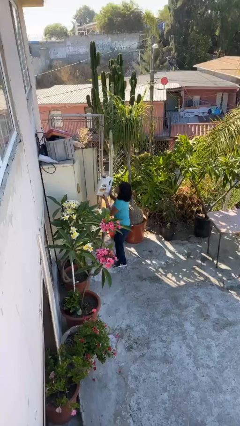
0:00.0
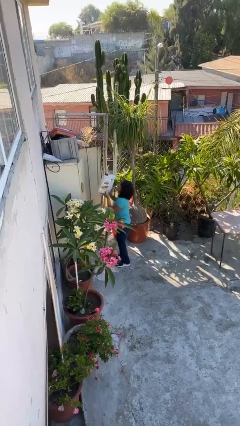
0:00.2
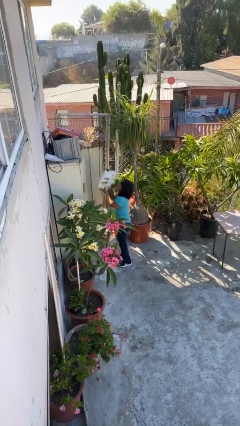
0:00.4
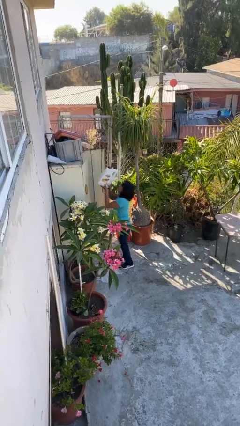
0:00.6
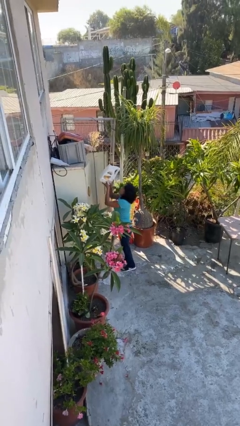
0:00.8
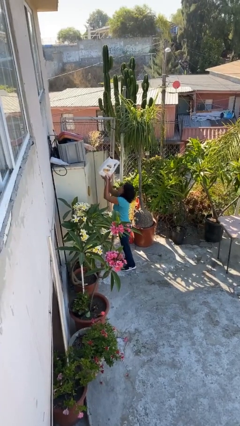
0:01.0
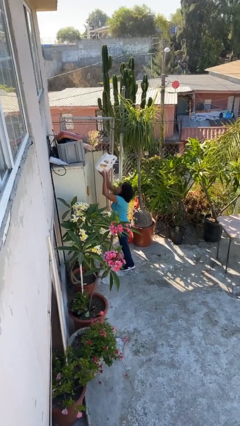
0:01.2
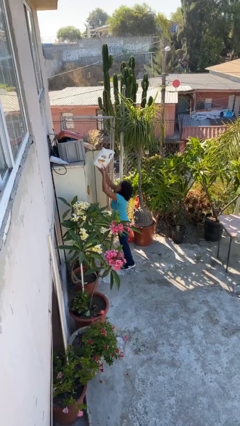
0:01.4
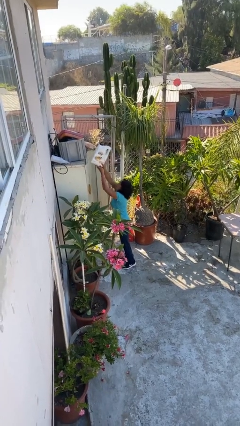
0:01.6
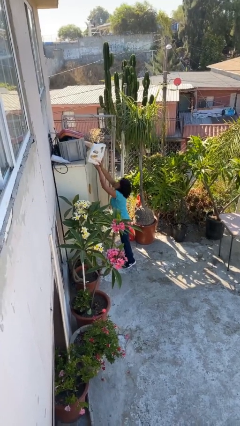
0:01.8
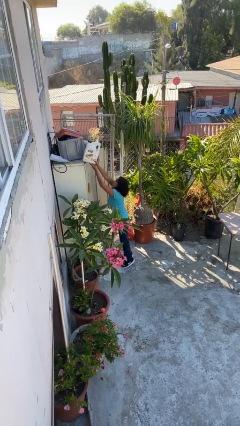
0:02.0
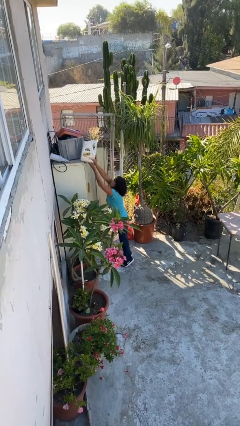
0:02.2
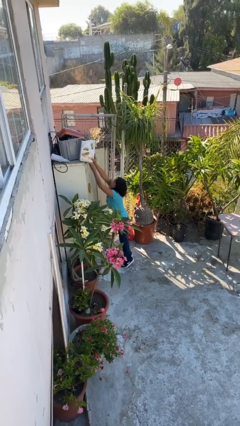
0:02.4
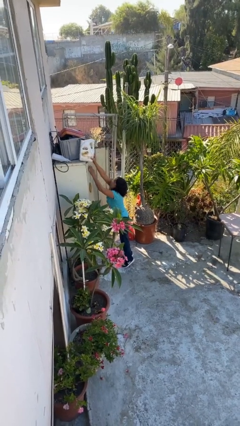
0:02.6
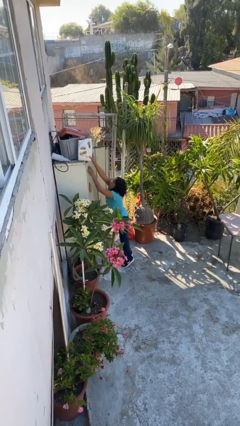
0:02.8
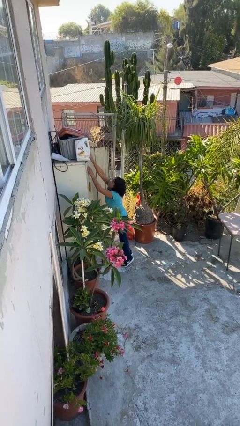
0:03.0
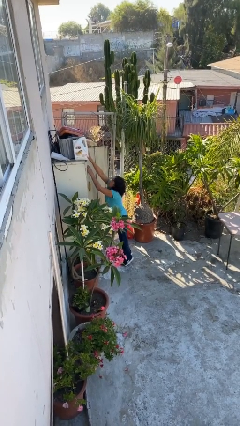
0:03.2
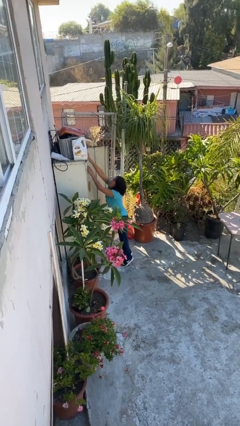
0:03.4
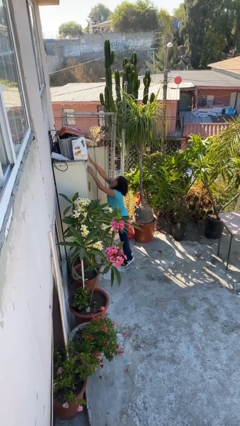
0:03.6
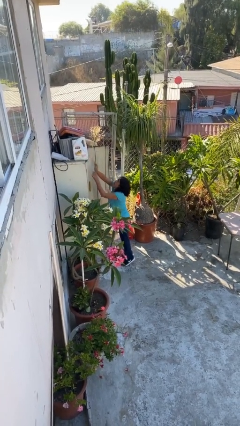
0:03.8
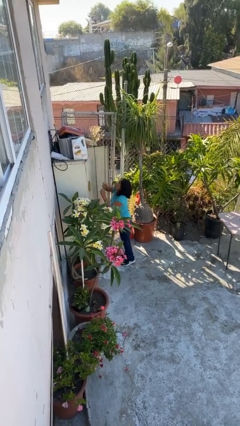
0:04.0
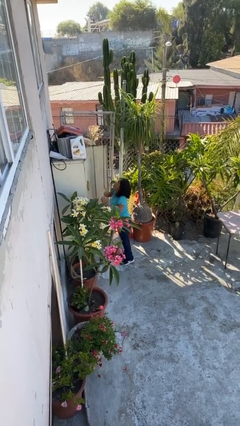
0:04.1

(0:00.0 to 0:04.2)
person puts down object on shelf

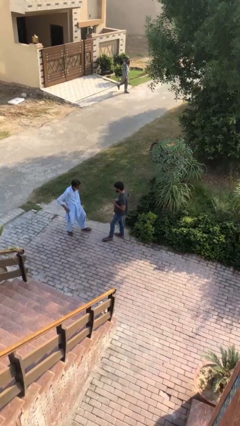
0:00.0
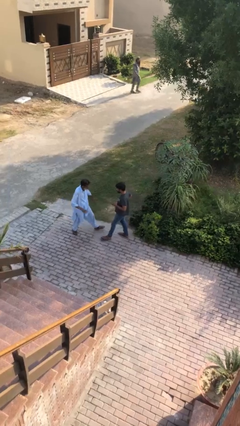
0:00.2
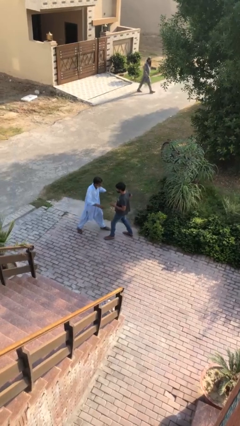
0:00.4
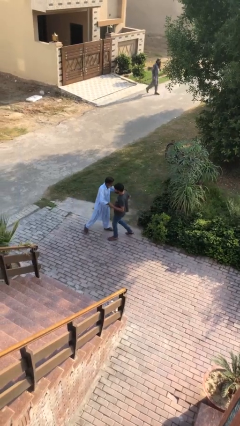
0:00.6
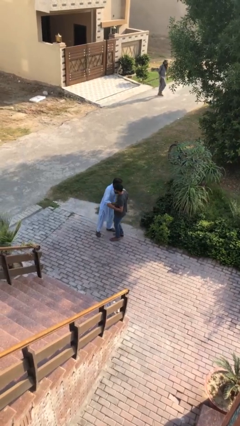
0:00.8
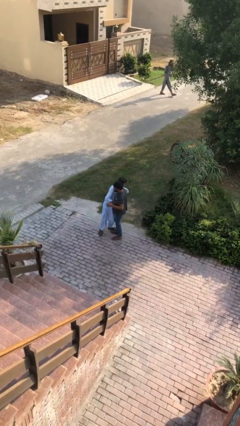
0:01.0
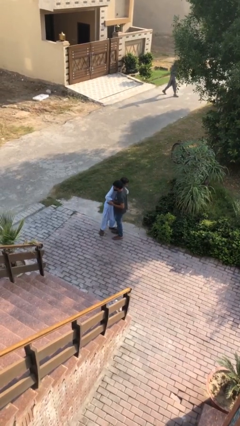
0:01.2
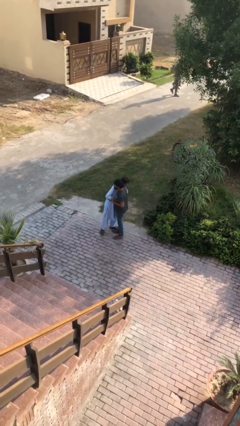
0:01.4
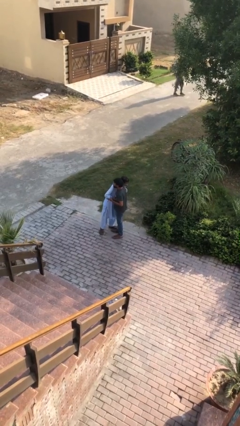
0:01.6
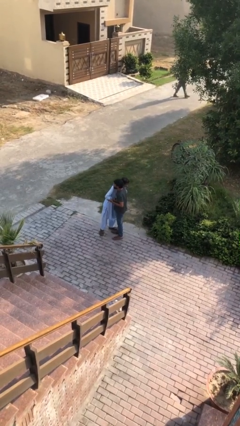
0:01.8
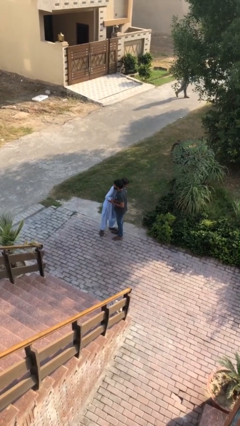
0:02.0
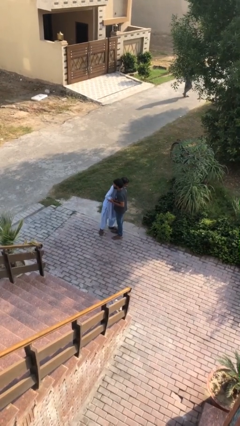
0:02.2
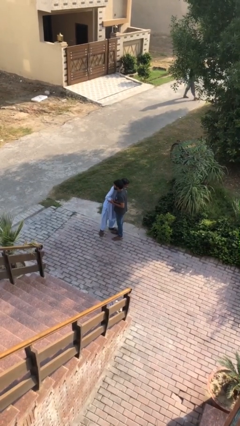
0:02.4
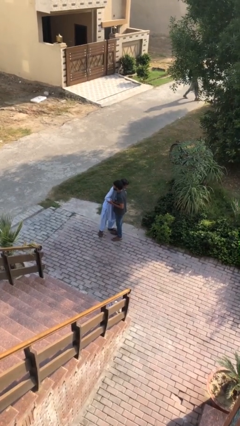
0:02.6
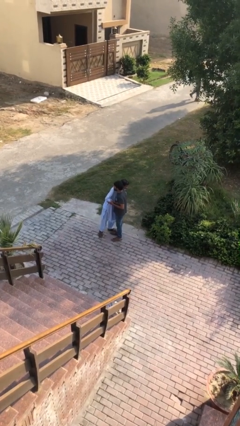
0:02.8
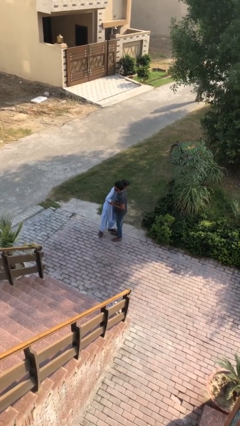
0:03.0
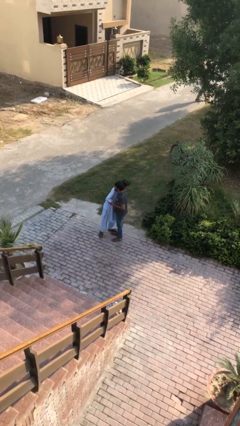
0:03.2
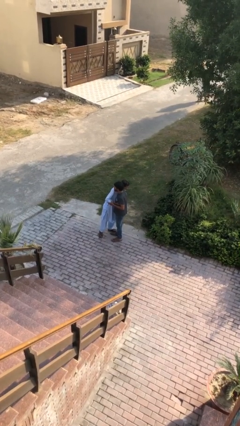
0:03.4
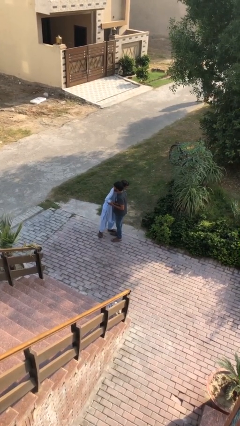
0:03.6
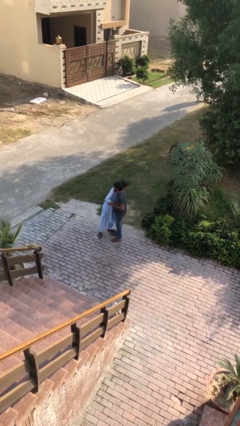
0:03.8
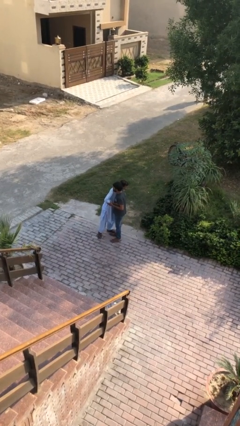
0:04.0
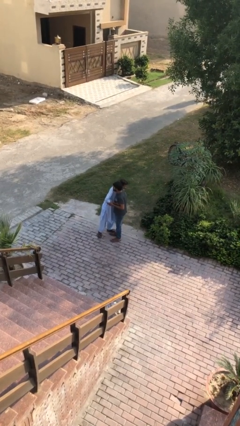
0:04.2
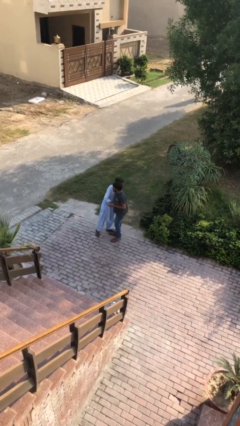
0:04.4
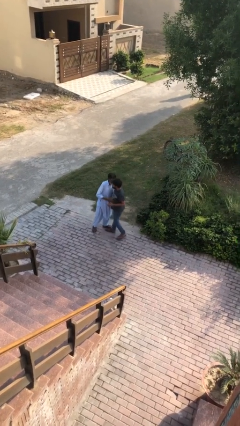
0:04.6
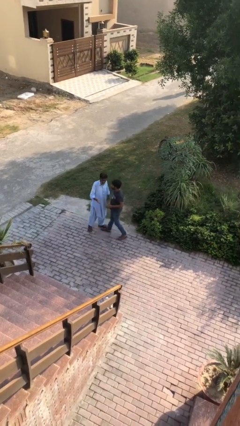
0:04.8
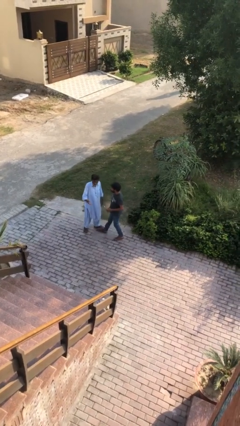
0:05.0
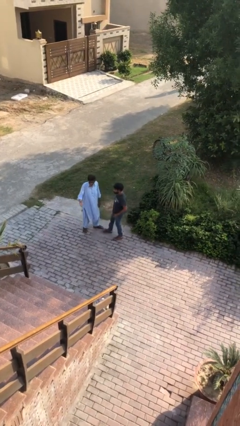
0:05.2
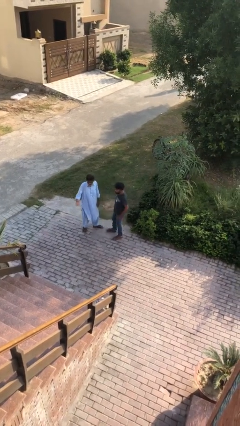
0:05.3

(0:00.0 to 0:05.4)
person embraces person

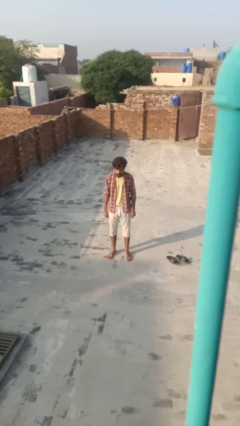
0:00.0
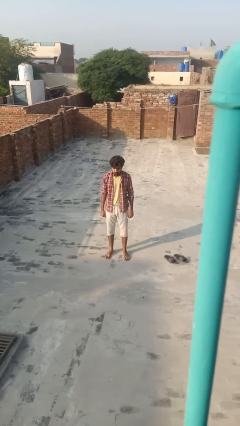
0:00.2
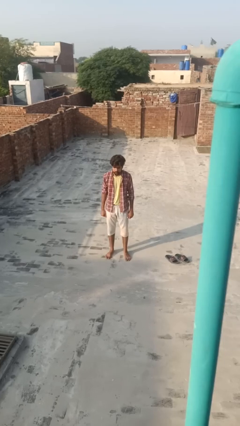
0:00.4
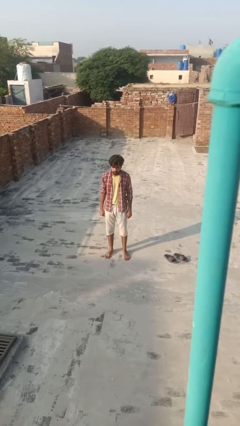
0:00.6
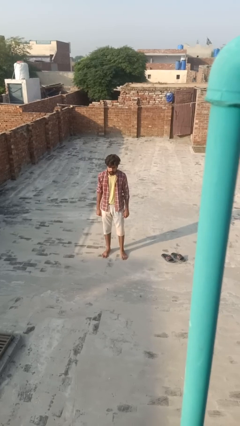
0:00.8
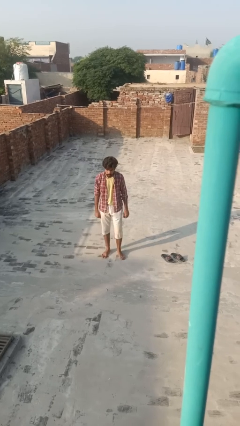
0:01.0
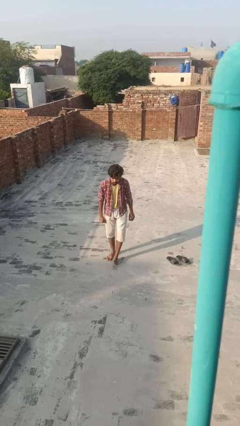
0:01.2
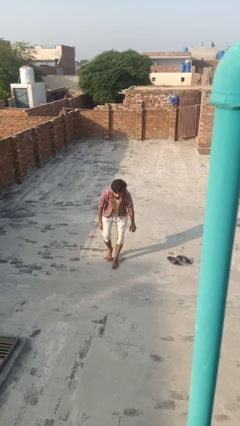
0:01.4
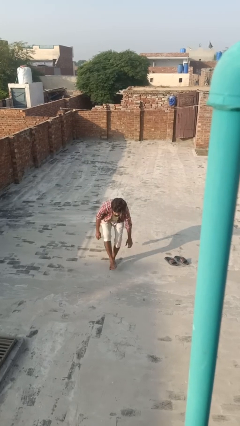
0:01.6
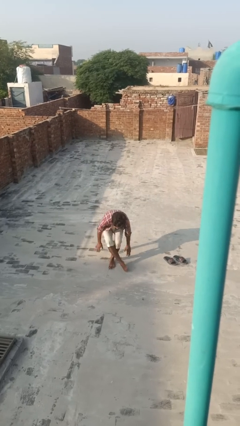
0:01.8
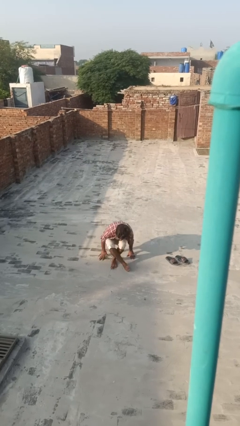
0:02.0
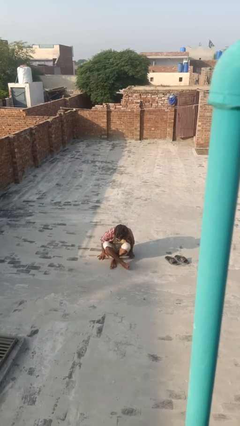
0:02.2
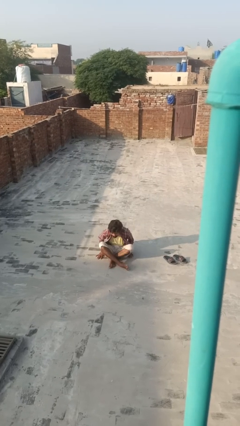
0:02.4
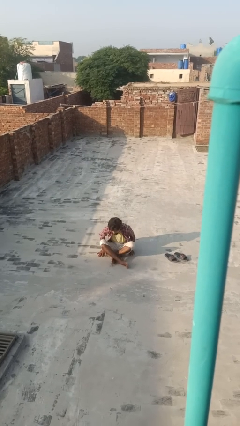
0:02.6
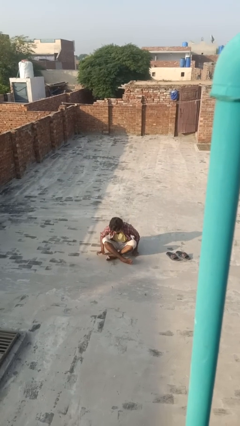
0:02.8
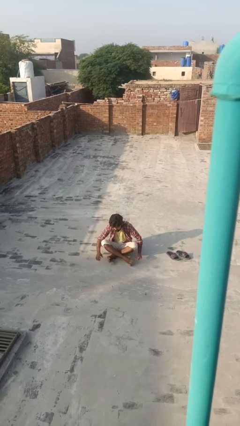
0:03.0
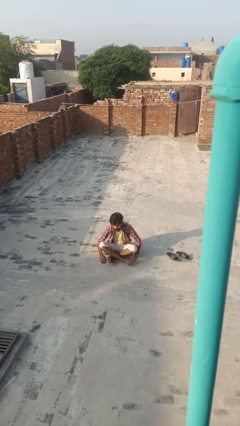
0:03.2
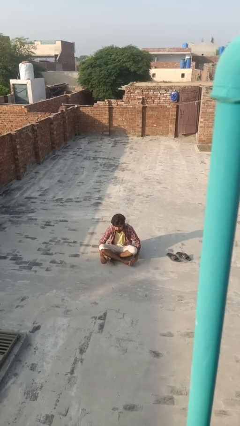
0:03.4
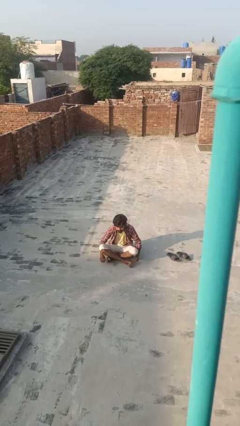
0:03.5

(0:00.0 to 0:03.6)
person sits crisscross

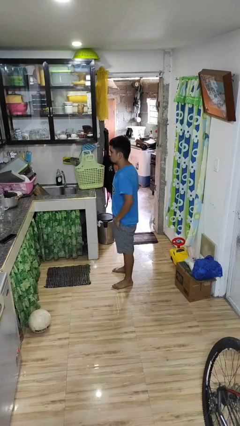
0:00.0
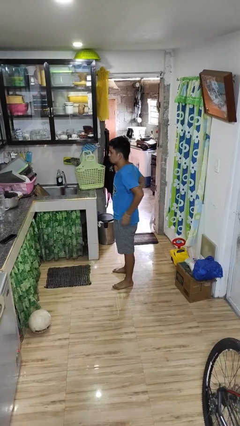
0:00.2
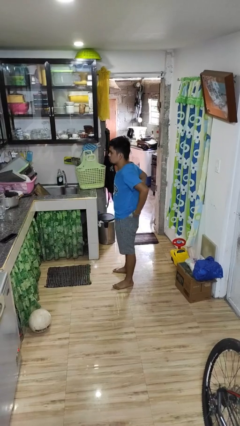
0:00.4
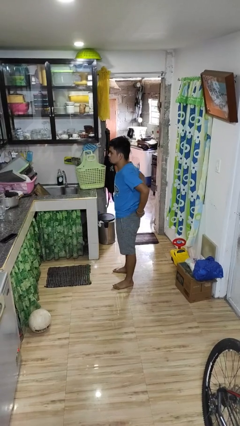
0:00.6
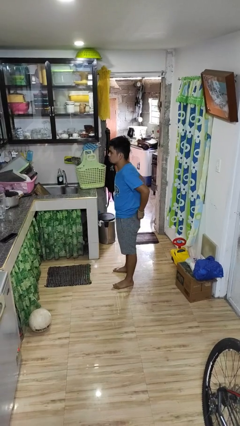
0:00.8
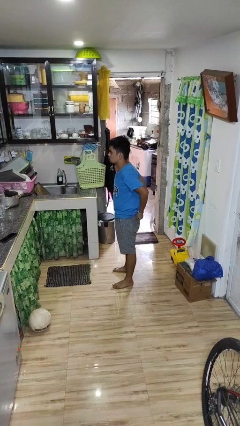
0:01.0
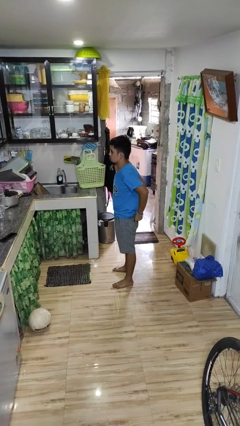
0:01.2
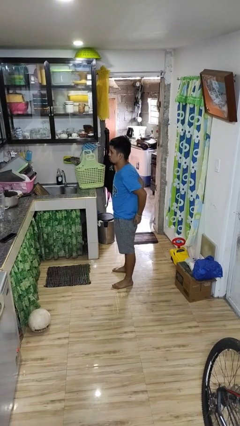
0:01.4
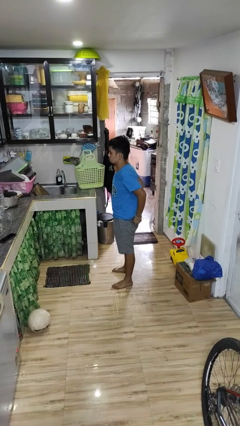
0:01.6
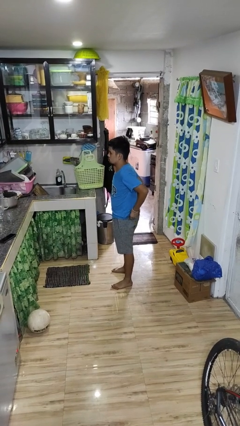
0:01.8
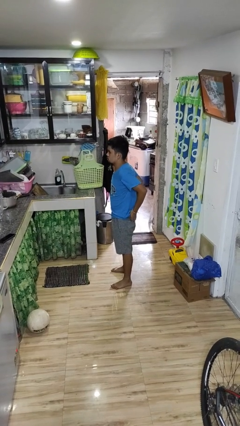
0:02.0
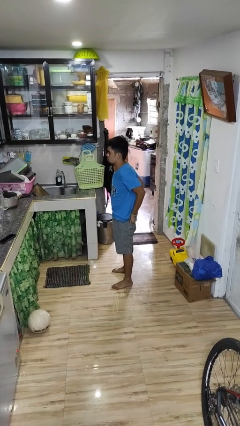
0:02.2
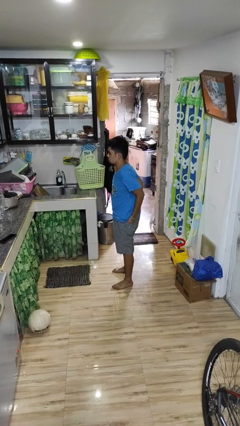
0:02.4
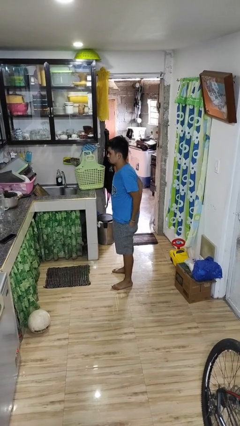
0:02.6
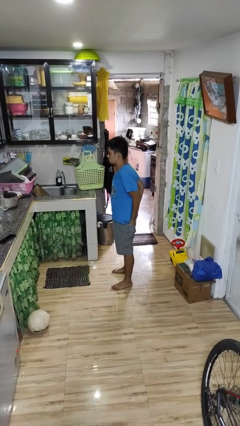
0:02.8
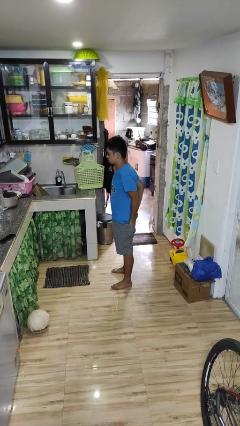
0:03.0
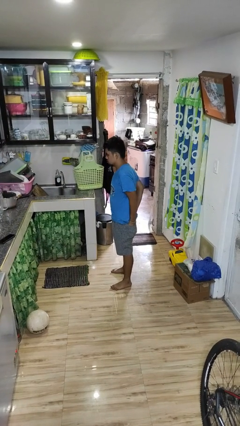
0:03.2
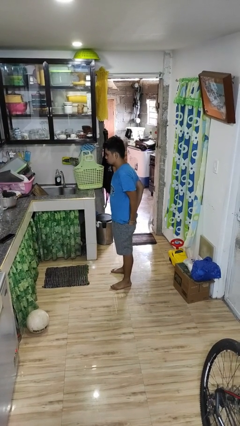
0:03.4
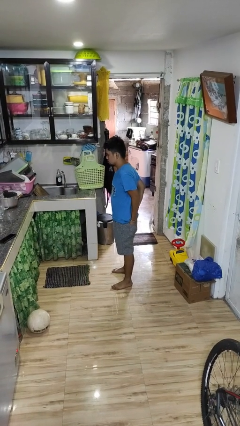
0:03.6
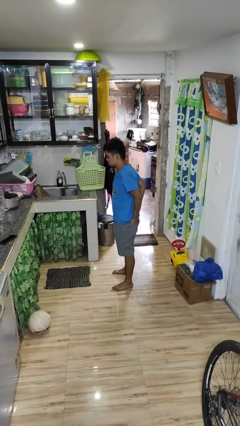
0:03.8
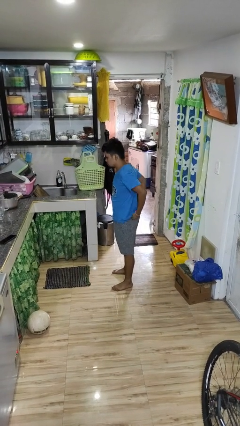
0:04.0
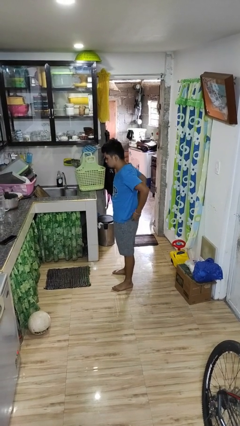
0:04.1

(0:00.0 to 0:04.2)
person puts hands in back pockets

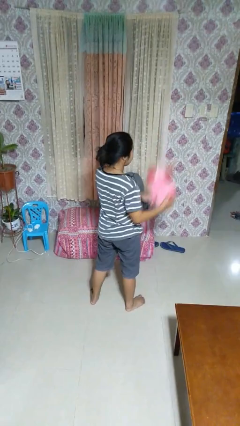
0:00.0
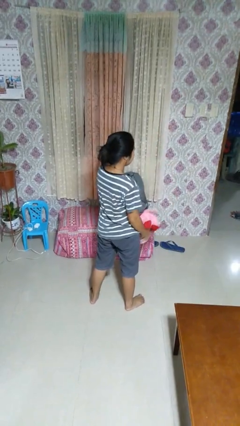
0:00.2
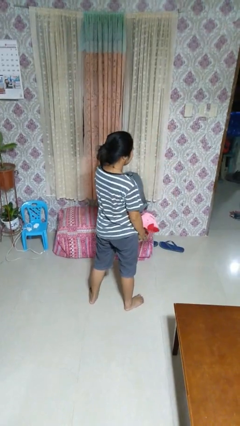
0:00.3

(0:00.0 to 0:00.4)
person catches dropped object
